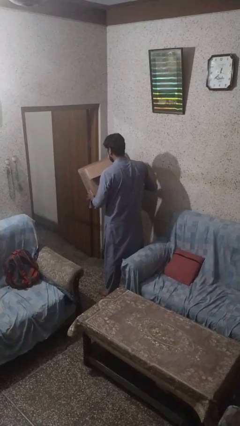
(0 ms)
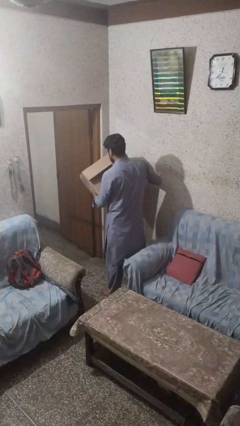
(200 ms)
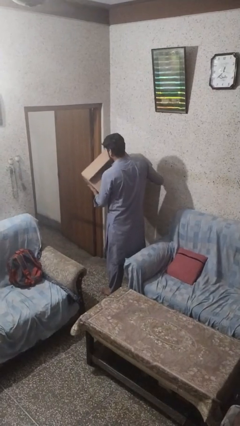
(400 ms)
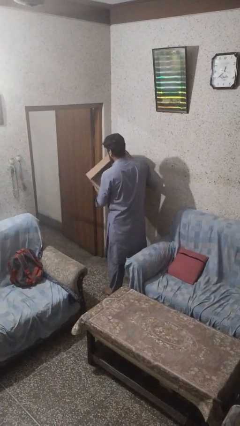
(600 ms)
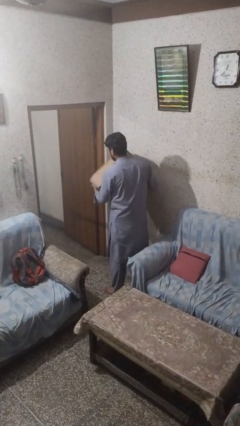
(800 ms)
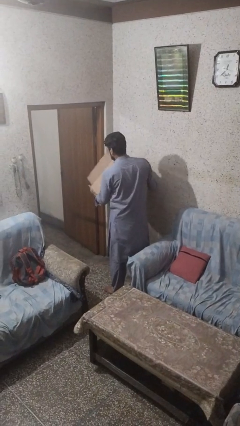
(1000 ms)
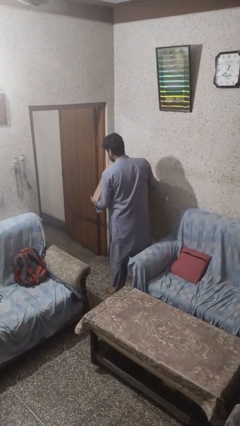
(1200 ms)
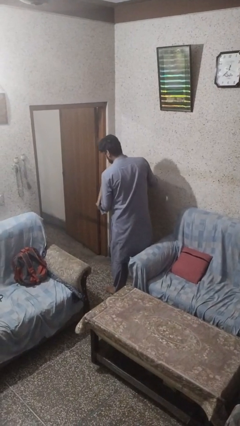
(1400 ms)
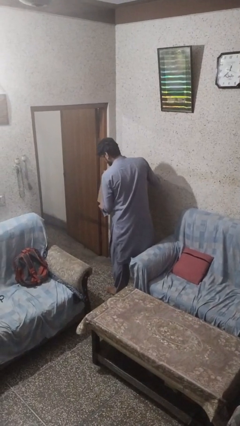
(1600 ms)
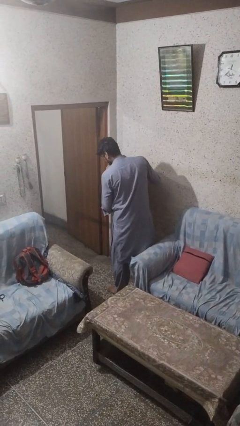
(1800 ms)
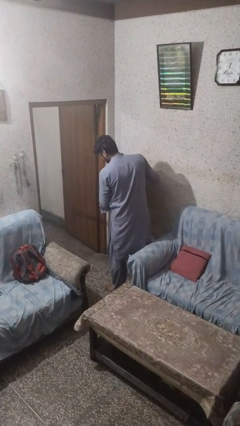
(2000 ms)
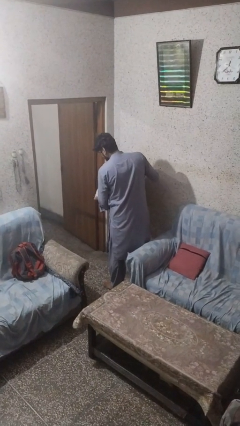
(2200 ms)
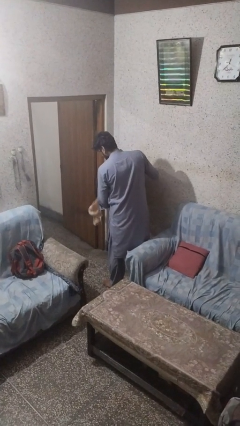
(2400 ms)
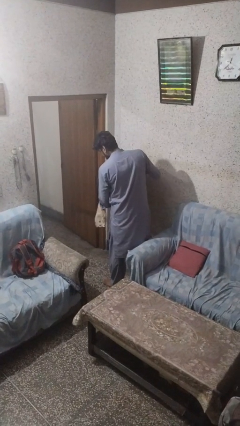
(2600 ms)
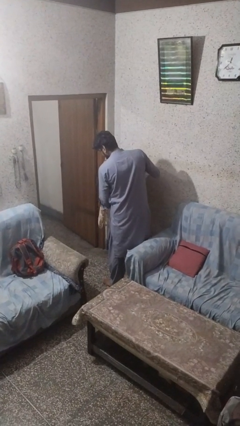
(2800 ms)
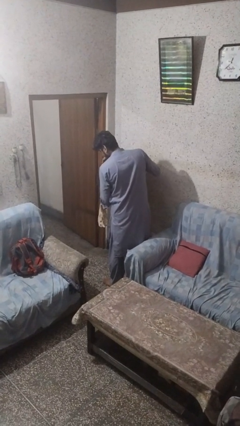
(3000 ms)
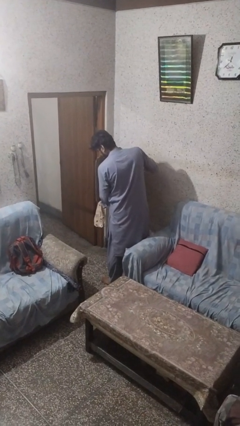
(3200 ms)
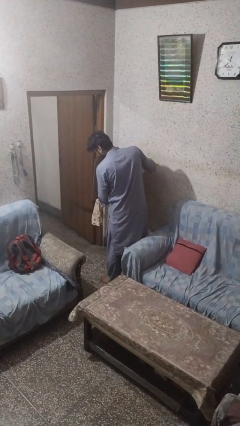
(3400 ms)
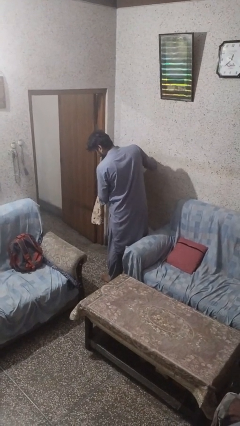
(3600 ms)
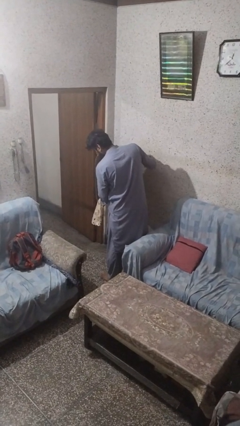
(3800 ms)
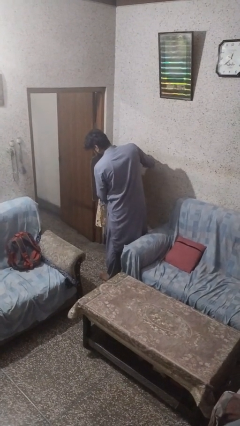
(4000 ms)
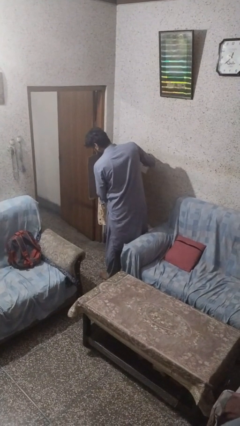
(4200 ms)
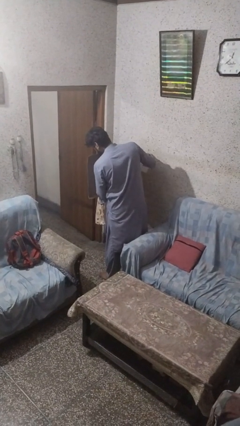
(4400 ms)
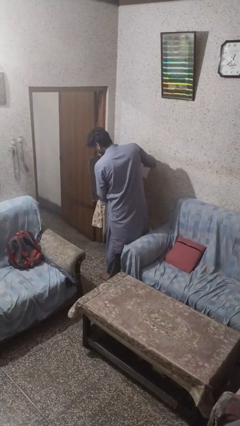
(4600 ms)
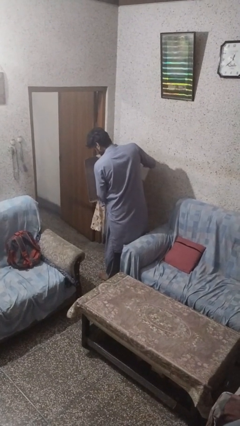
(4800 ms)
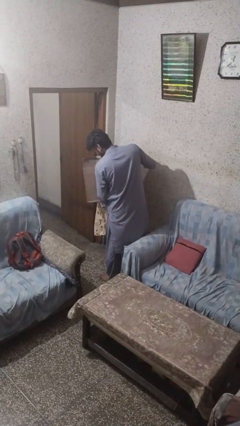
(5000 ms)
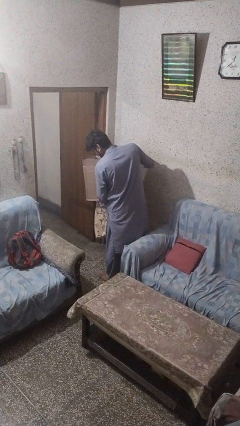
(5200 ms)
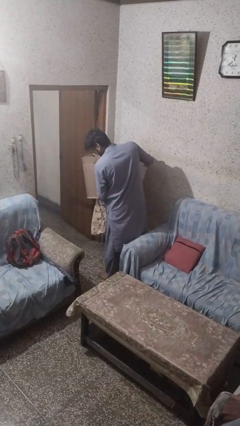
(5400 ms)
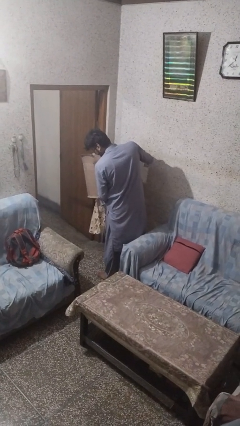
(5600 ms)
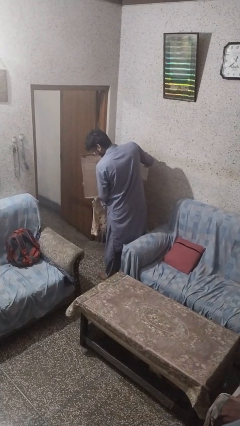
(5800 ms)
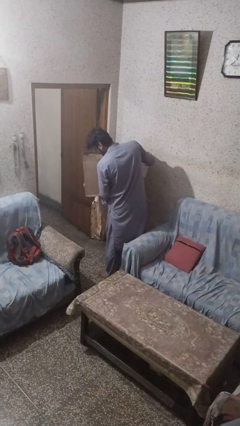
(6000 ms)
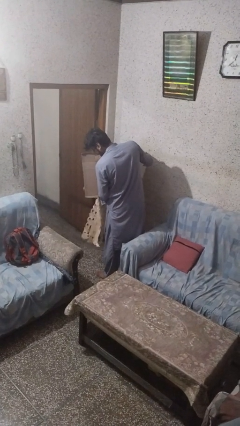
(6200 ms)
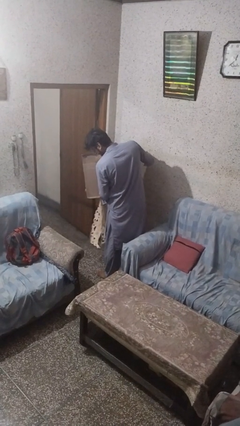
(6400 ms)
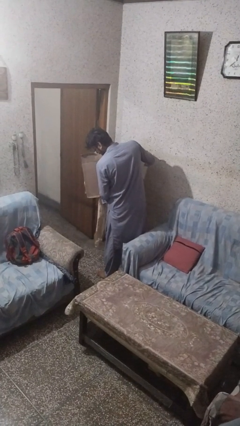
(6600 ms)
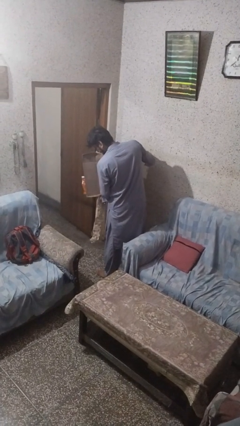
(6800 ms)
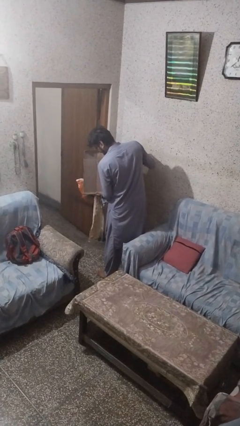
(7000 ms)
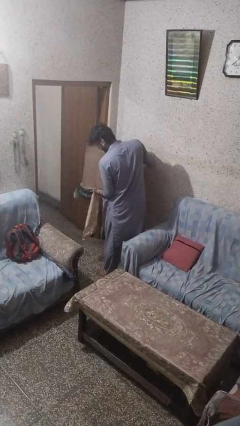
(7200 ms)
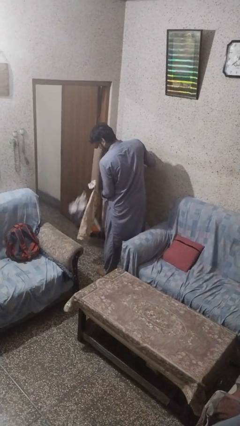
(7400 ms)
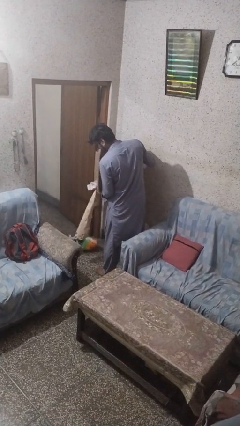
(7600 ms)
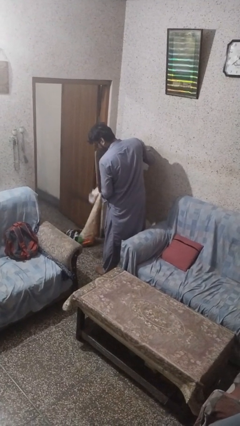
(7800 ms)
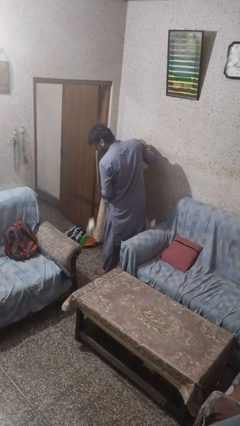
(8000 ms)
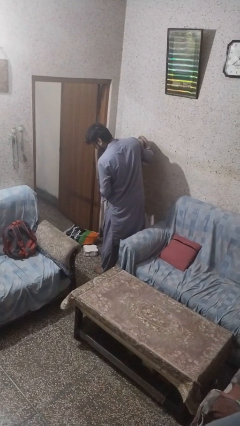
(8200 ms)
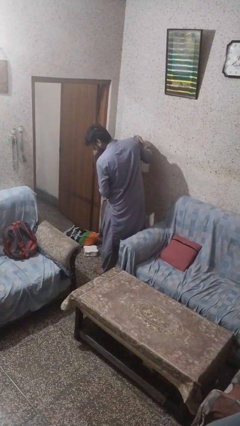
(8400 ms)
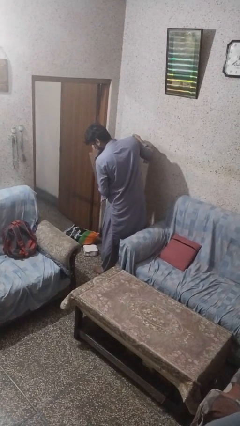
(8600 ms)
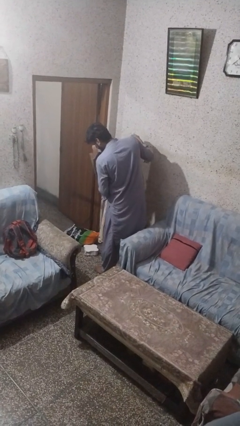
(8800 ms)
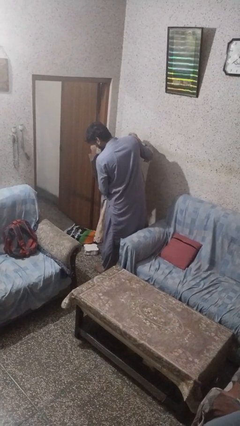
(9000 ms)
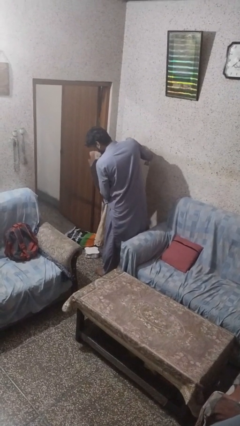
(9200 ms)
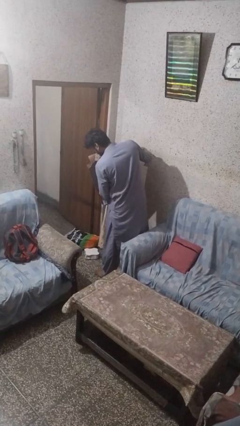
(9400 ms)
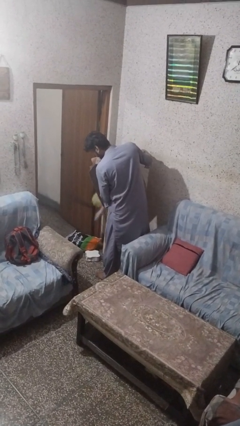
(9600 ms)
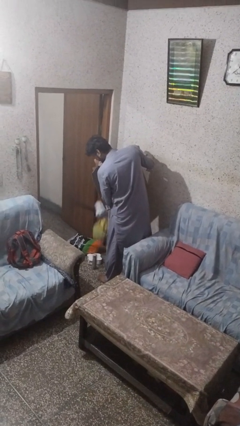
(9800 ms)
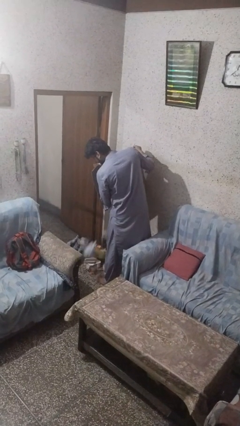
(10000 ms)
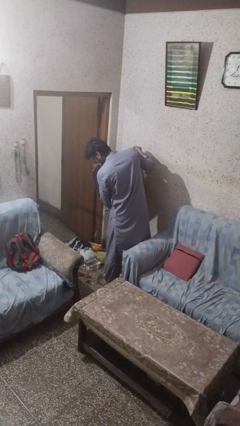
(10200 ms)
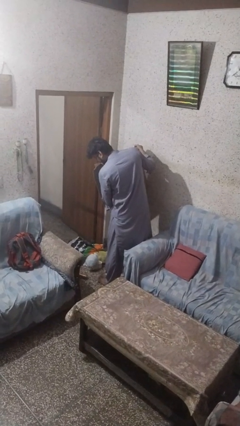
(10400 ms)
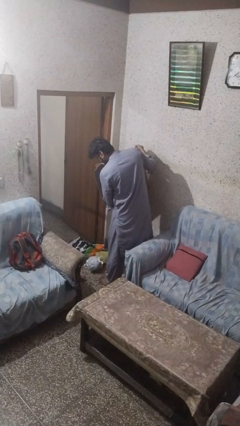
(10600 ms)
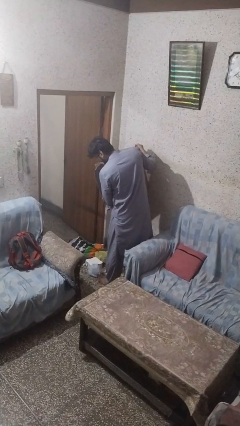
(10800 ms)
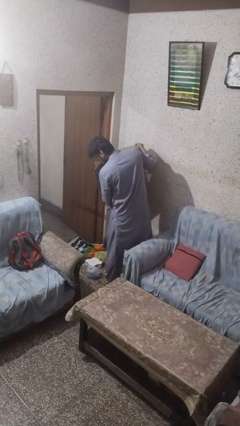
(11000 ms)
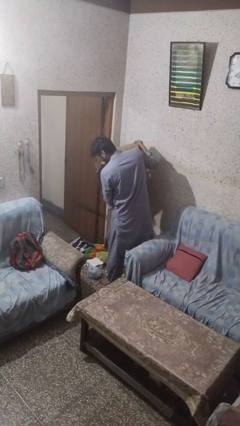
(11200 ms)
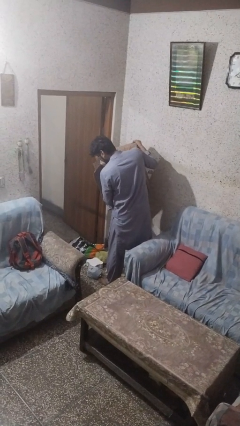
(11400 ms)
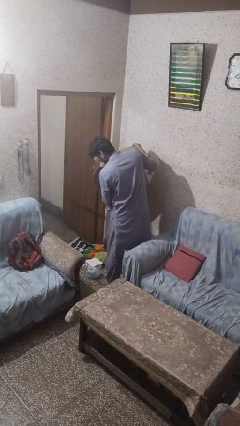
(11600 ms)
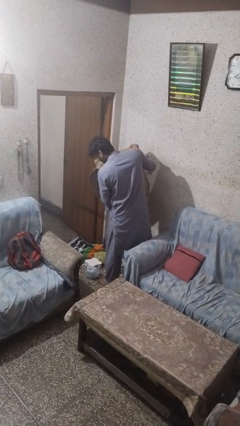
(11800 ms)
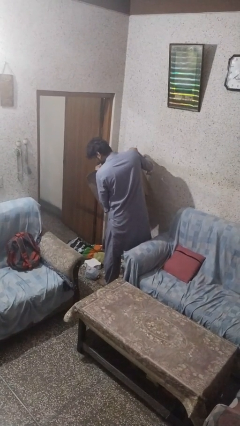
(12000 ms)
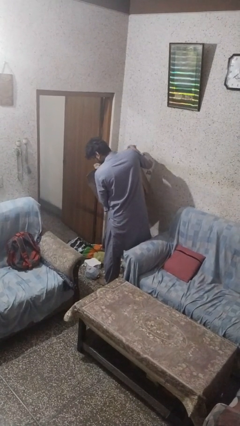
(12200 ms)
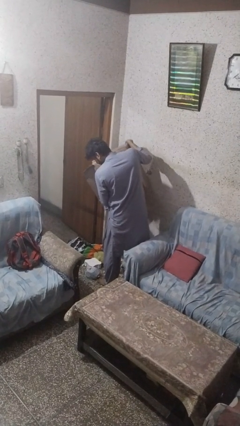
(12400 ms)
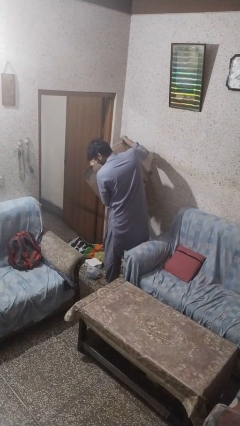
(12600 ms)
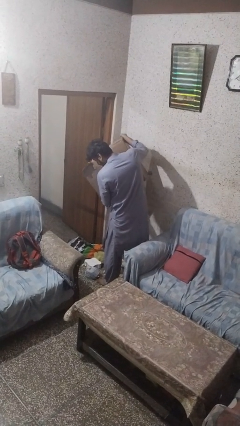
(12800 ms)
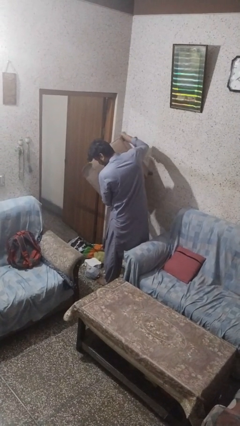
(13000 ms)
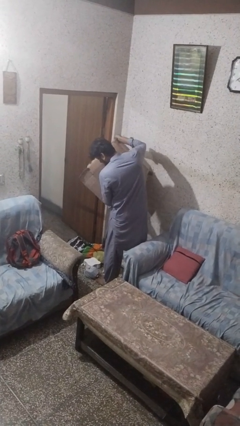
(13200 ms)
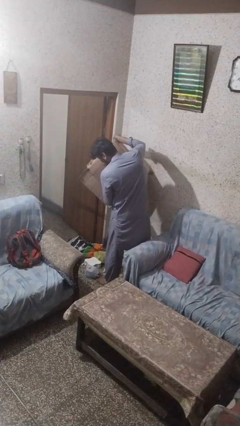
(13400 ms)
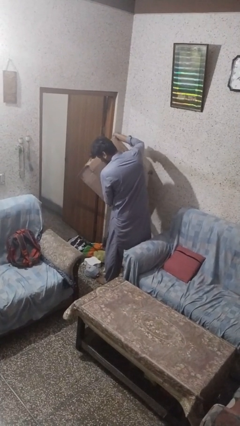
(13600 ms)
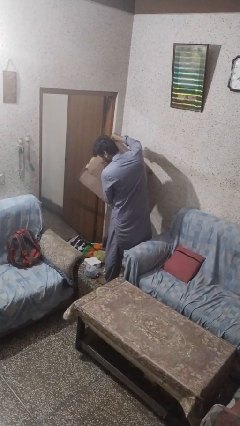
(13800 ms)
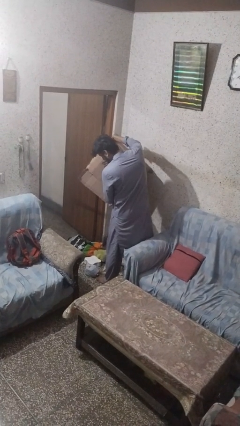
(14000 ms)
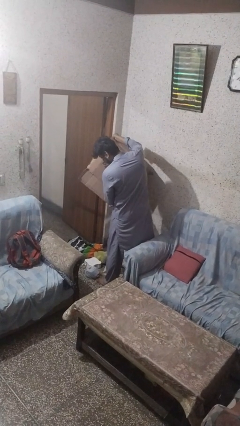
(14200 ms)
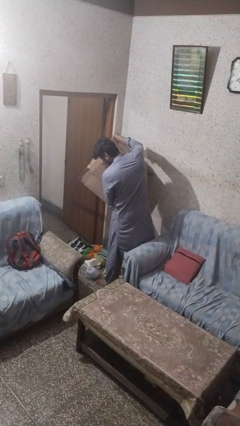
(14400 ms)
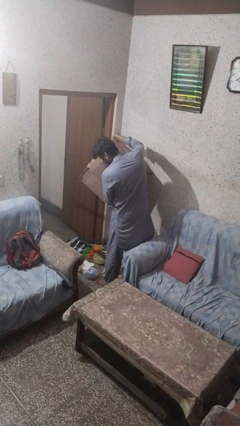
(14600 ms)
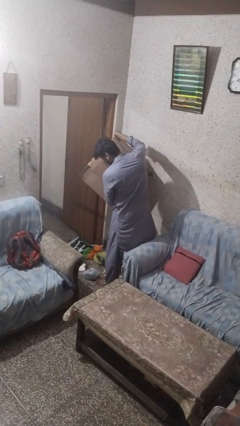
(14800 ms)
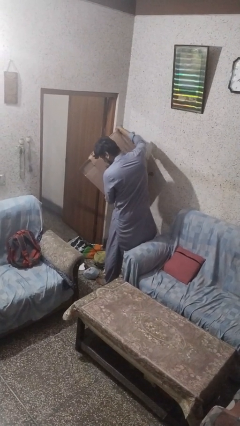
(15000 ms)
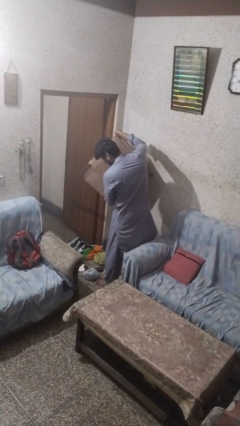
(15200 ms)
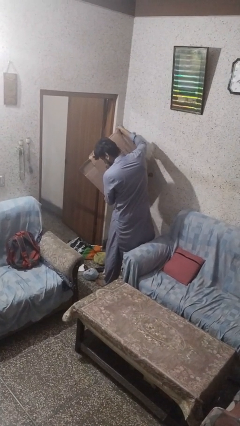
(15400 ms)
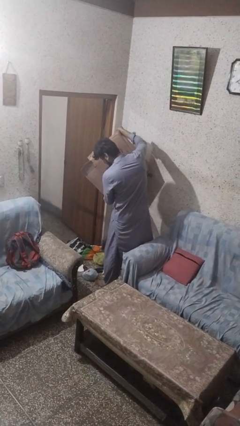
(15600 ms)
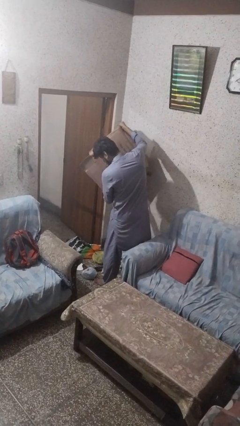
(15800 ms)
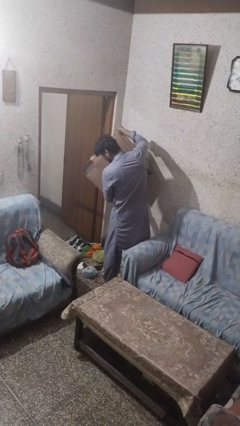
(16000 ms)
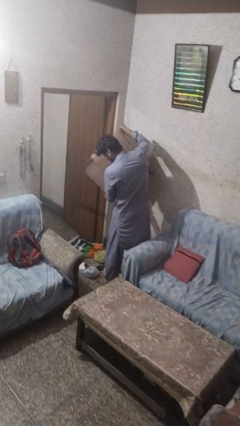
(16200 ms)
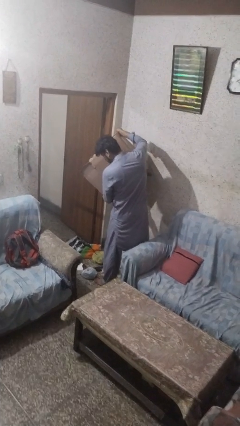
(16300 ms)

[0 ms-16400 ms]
person unloads box onto floor

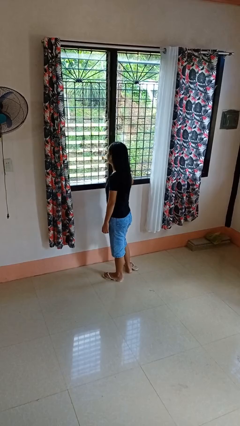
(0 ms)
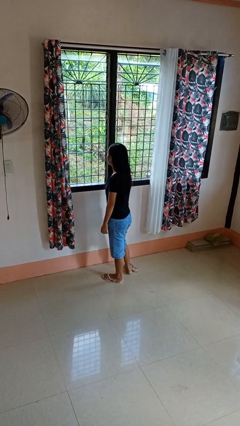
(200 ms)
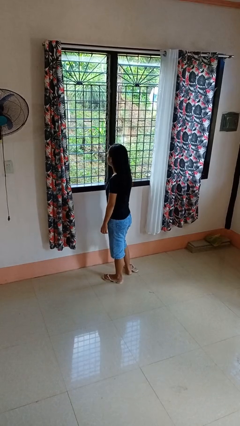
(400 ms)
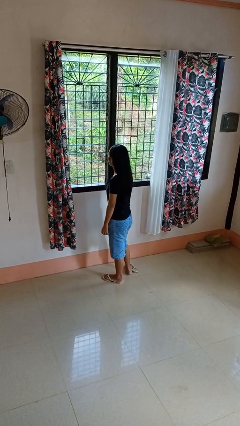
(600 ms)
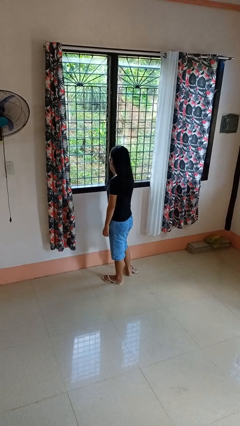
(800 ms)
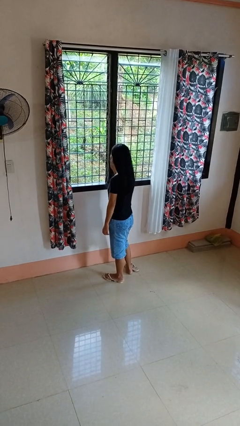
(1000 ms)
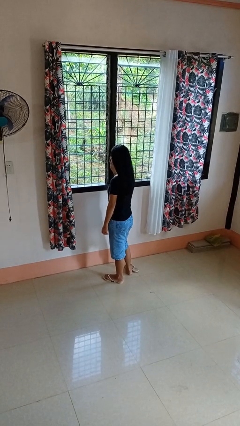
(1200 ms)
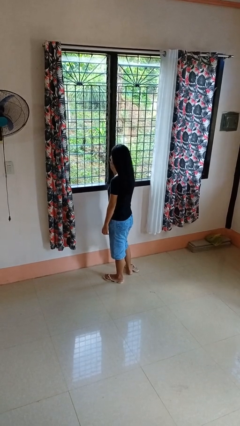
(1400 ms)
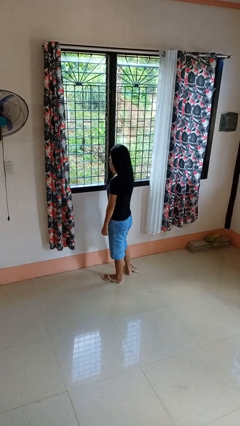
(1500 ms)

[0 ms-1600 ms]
person closes home window
